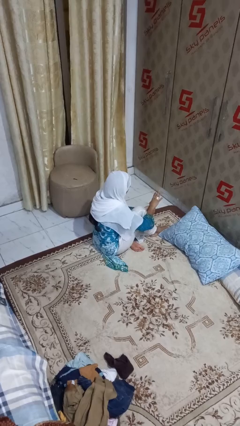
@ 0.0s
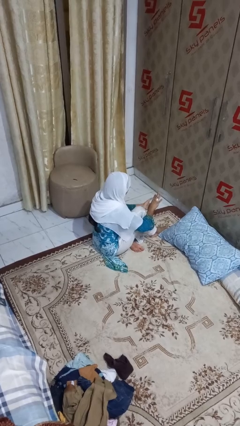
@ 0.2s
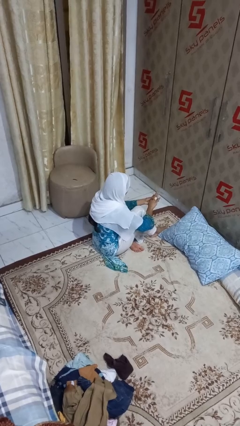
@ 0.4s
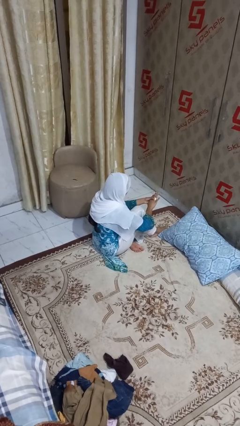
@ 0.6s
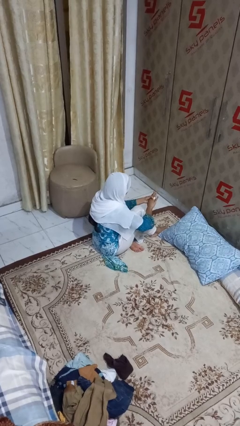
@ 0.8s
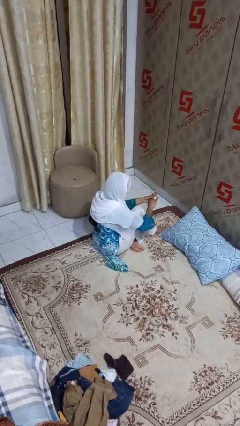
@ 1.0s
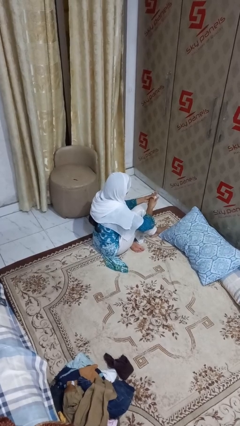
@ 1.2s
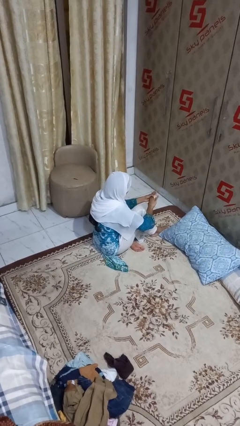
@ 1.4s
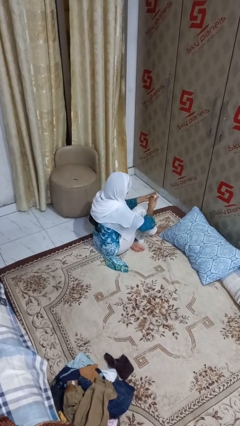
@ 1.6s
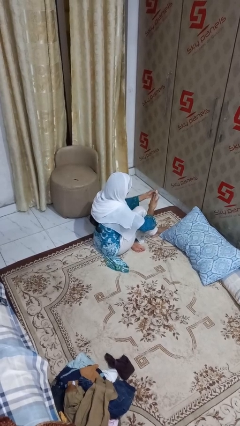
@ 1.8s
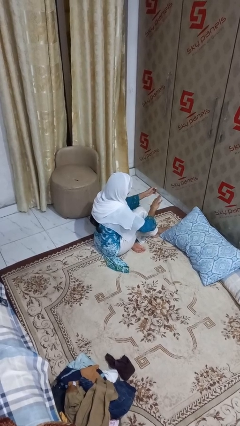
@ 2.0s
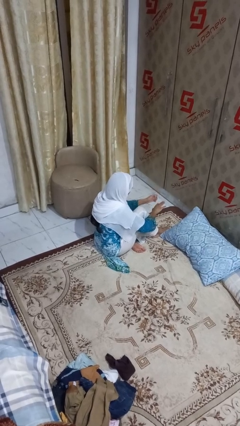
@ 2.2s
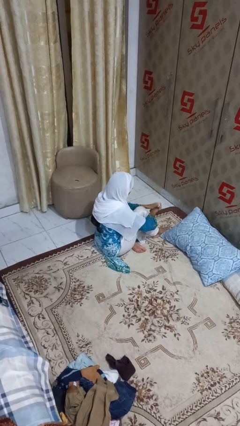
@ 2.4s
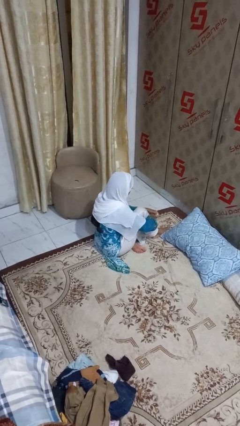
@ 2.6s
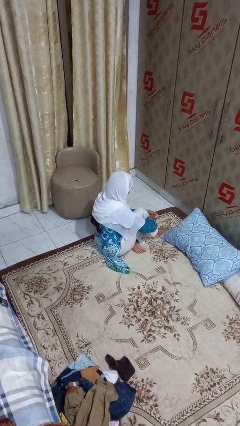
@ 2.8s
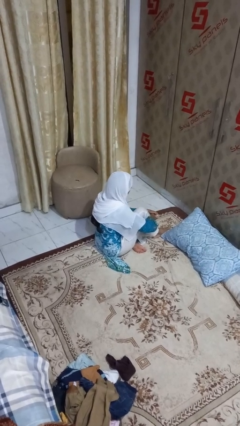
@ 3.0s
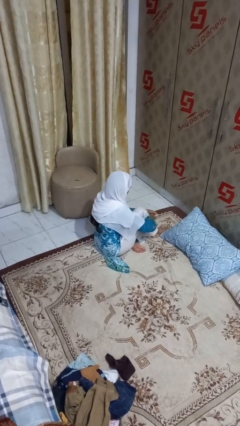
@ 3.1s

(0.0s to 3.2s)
person takes off ring

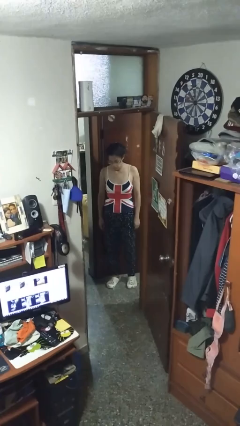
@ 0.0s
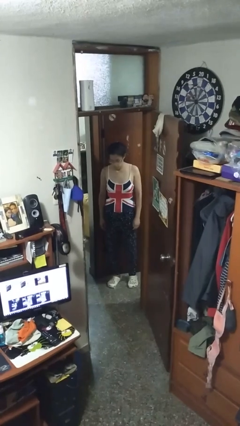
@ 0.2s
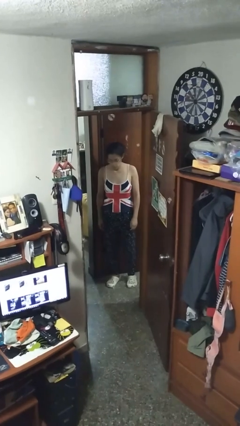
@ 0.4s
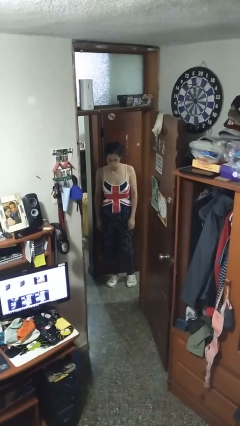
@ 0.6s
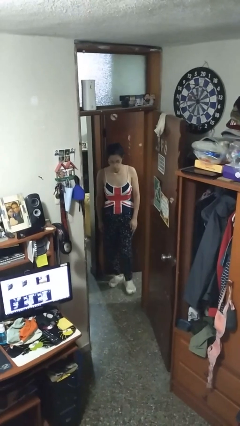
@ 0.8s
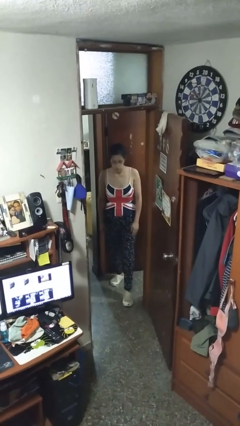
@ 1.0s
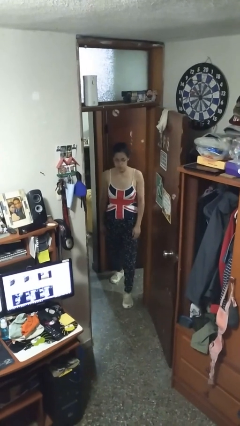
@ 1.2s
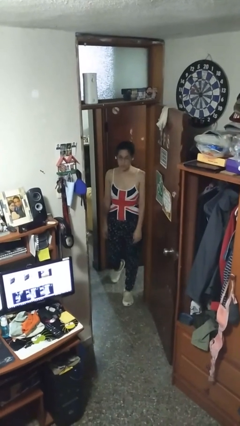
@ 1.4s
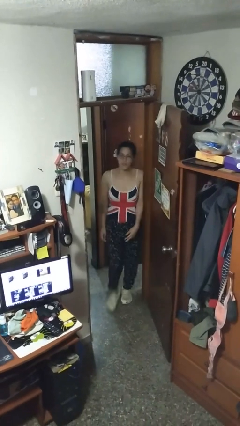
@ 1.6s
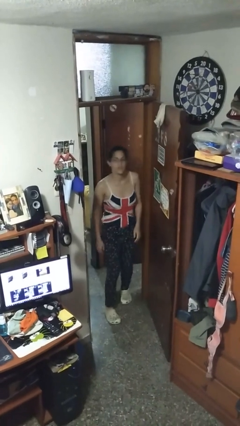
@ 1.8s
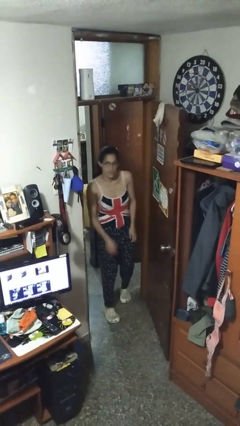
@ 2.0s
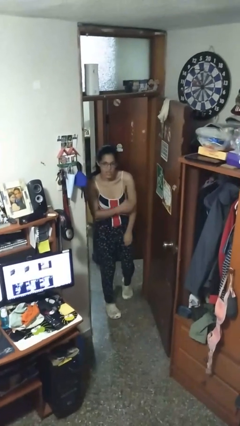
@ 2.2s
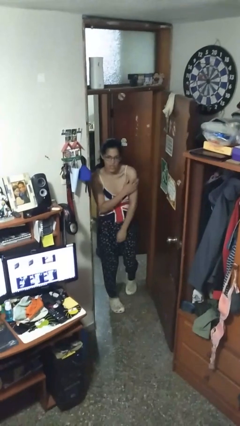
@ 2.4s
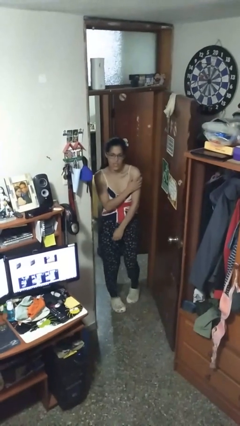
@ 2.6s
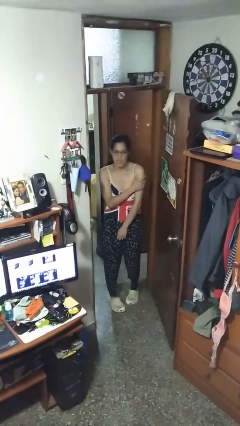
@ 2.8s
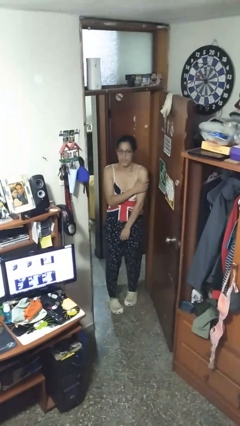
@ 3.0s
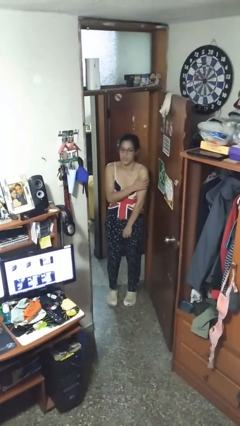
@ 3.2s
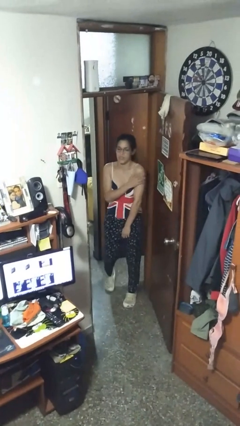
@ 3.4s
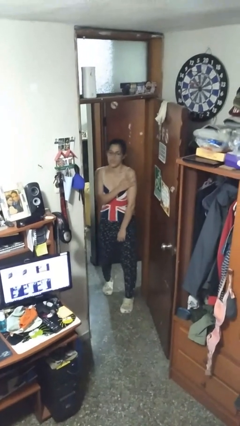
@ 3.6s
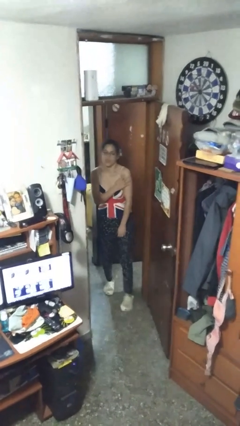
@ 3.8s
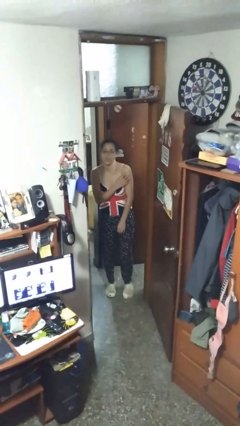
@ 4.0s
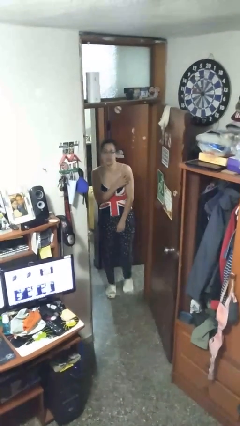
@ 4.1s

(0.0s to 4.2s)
person bumps into wall

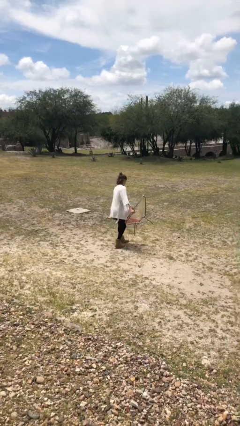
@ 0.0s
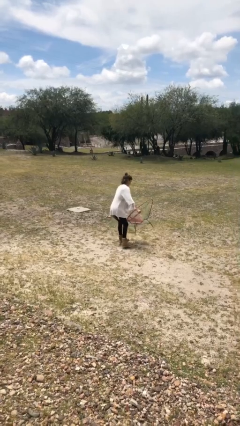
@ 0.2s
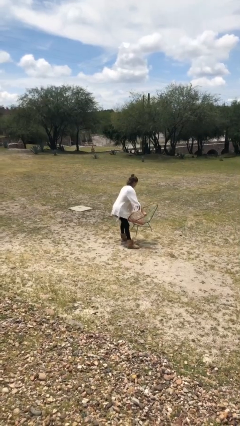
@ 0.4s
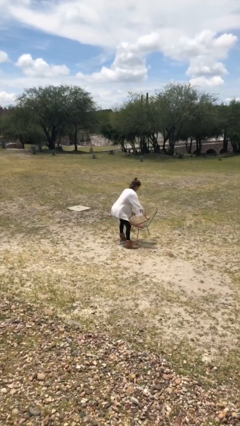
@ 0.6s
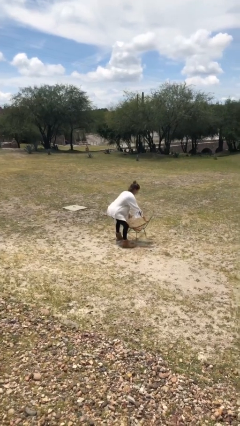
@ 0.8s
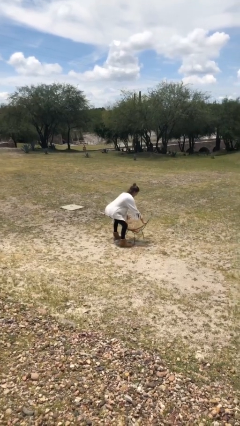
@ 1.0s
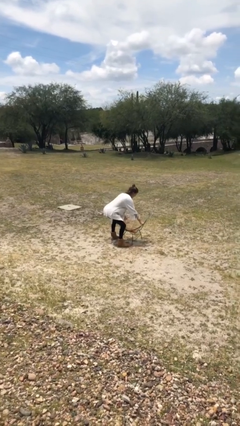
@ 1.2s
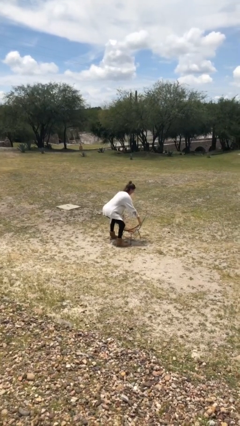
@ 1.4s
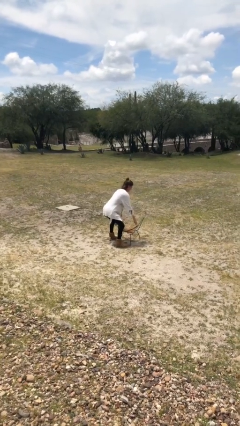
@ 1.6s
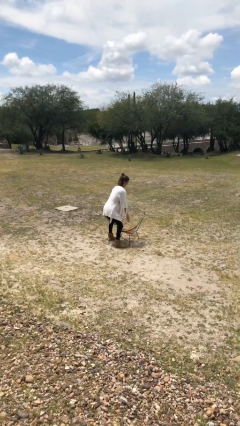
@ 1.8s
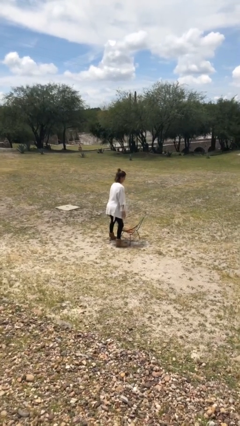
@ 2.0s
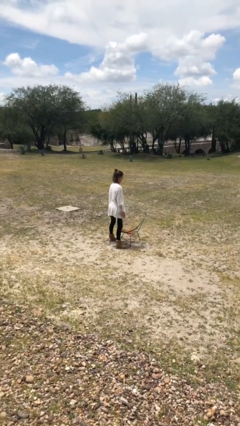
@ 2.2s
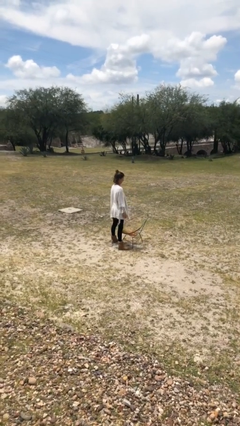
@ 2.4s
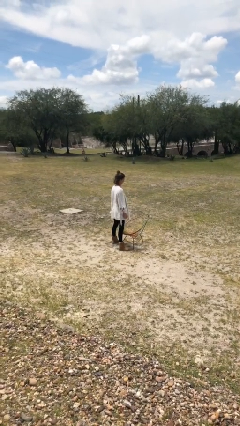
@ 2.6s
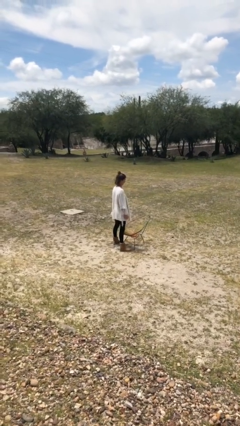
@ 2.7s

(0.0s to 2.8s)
person puts down object on floor

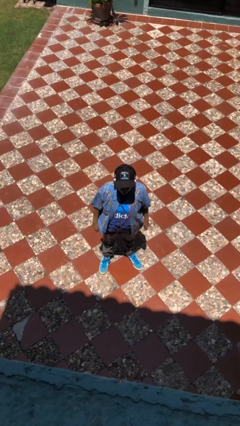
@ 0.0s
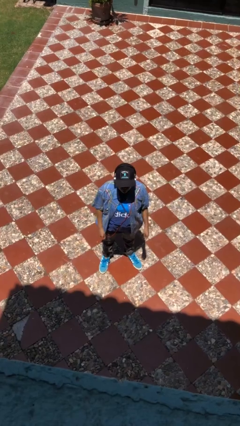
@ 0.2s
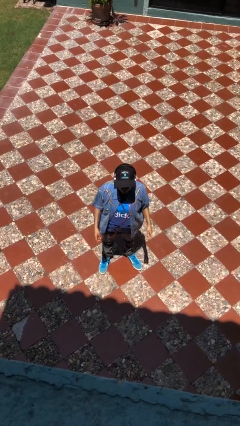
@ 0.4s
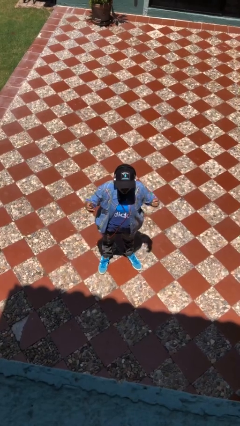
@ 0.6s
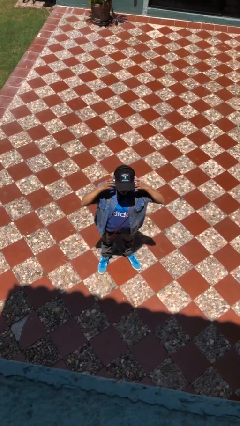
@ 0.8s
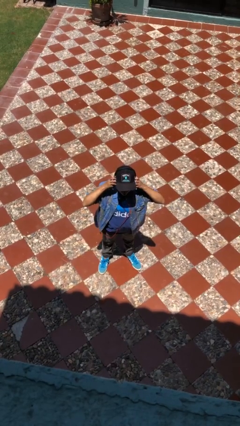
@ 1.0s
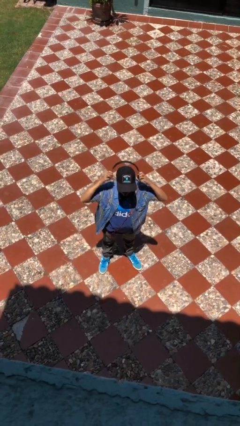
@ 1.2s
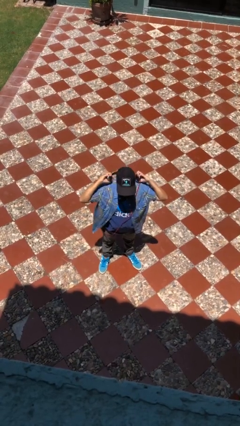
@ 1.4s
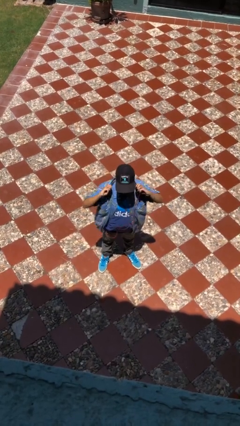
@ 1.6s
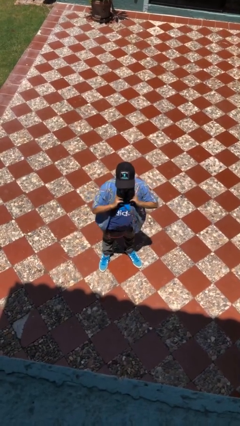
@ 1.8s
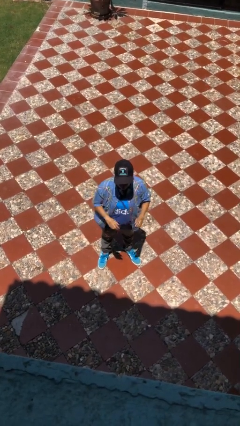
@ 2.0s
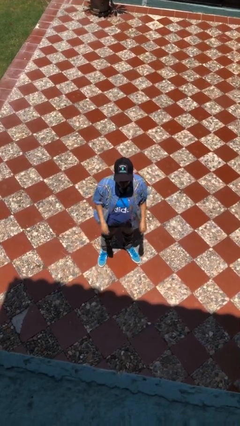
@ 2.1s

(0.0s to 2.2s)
person takes off headphones

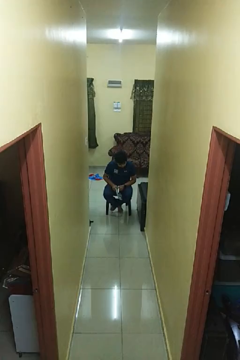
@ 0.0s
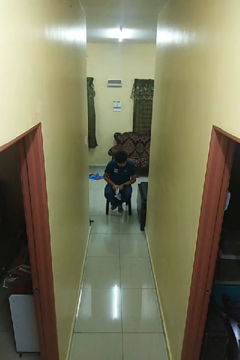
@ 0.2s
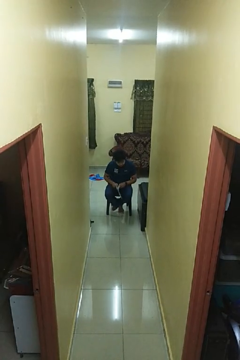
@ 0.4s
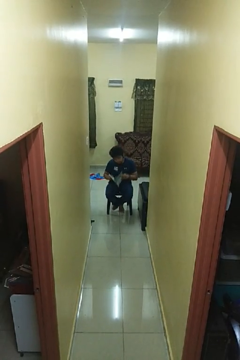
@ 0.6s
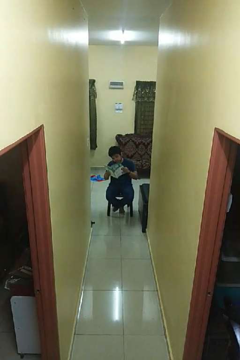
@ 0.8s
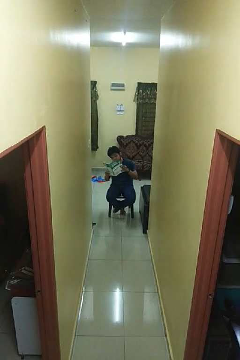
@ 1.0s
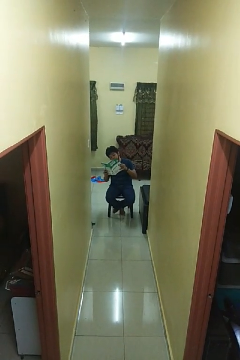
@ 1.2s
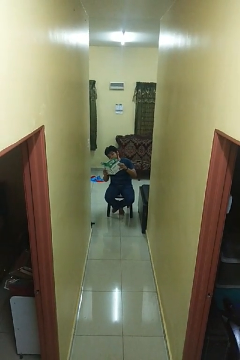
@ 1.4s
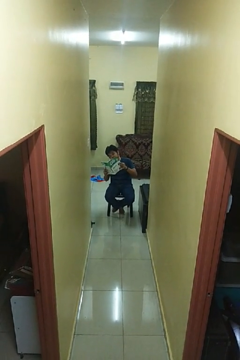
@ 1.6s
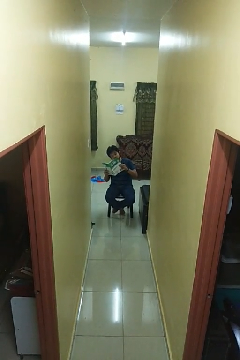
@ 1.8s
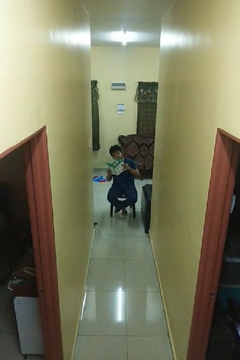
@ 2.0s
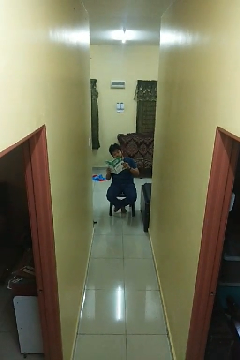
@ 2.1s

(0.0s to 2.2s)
person reads magazine

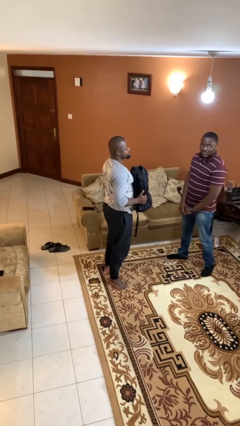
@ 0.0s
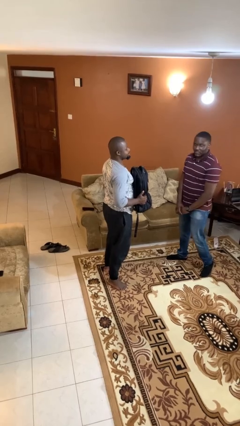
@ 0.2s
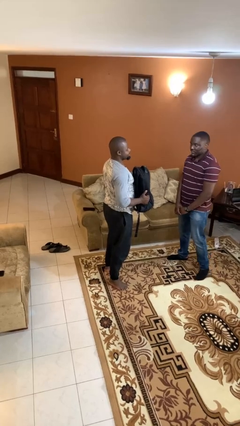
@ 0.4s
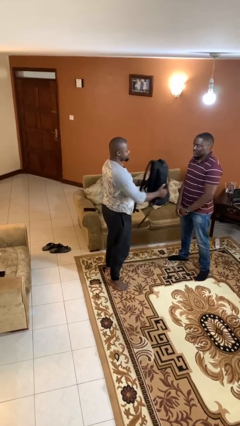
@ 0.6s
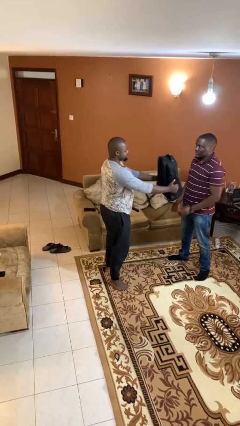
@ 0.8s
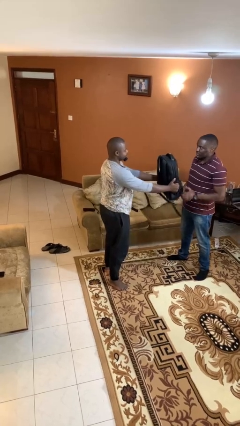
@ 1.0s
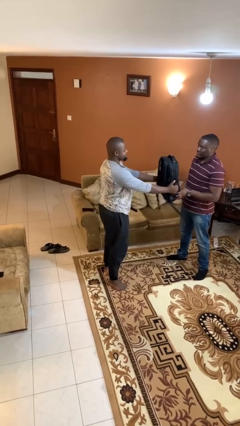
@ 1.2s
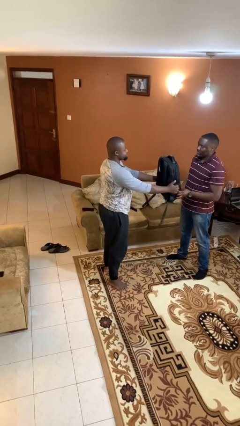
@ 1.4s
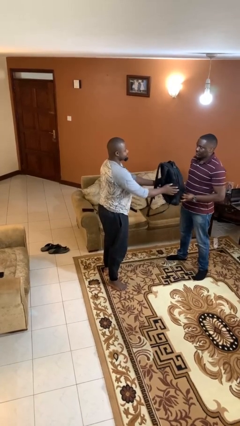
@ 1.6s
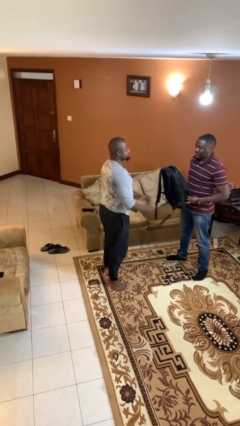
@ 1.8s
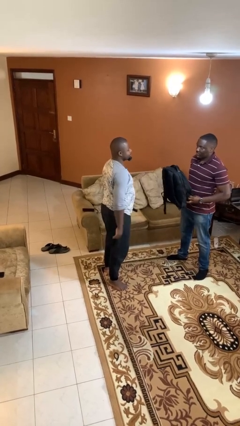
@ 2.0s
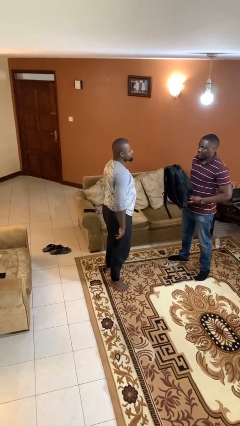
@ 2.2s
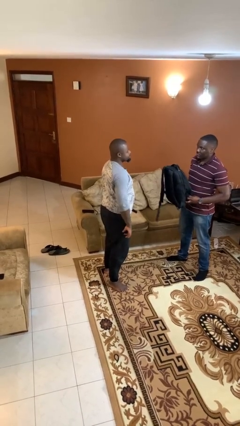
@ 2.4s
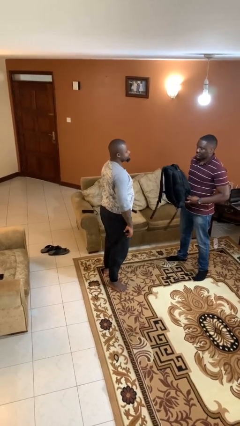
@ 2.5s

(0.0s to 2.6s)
person transfers object to person

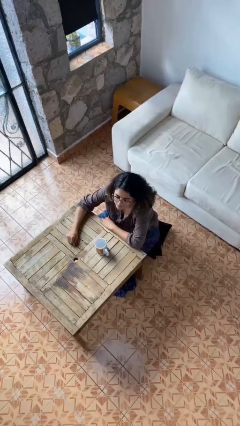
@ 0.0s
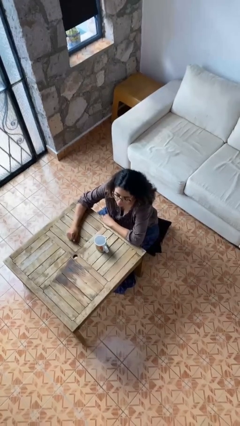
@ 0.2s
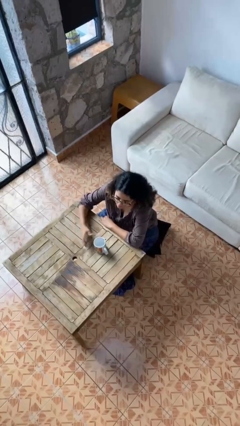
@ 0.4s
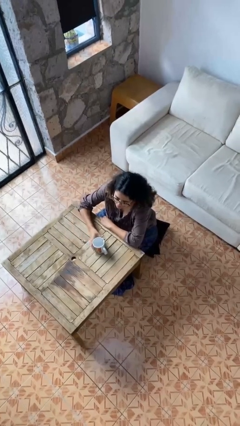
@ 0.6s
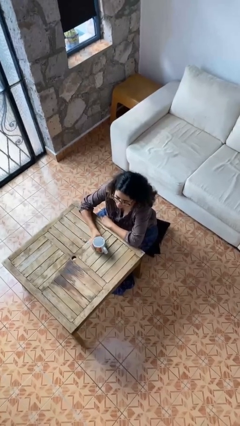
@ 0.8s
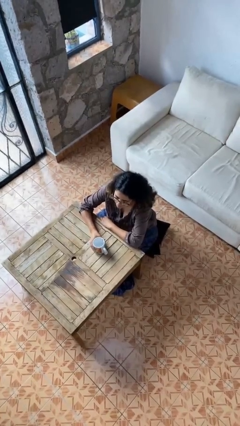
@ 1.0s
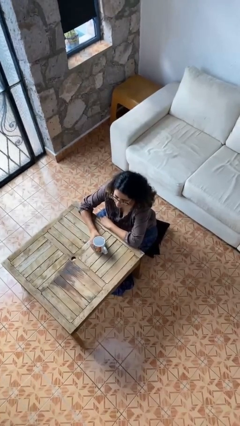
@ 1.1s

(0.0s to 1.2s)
person picks up object from table
